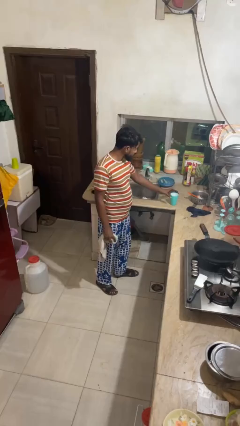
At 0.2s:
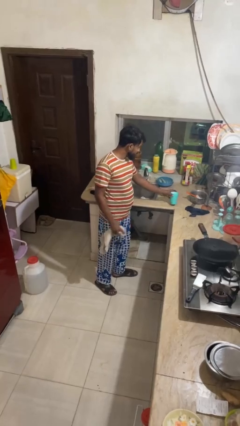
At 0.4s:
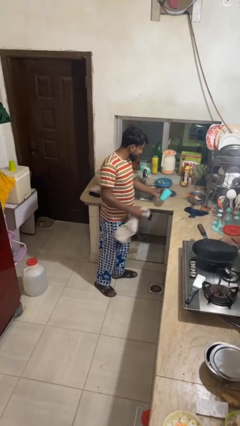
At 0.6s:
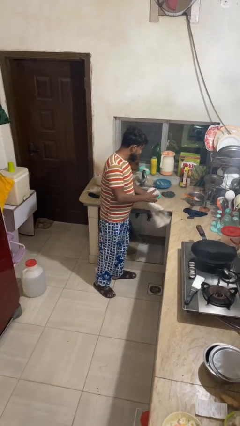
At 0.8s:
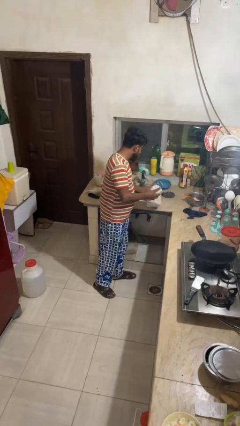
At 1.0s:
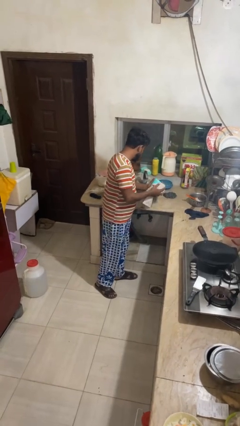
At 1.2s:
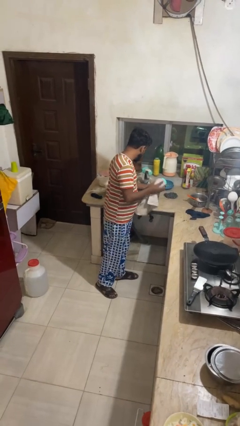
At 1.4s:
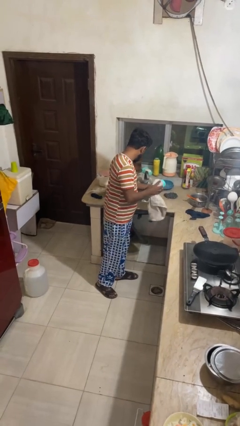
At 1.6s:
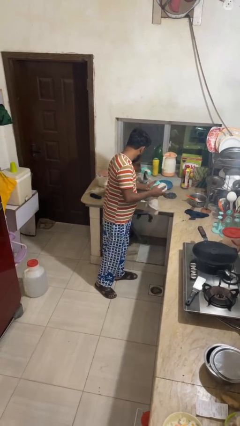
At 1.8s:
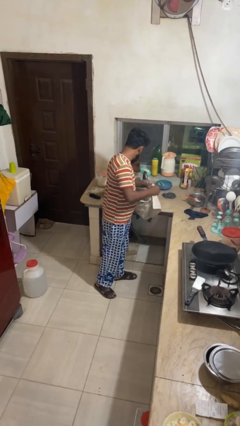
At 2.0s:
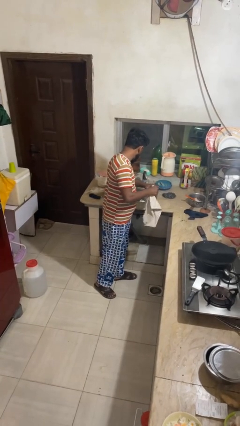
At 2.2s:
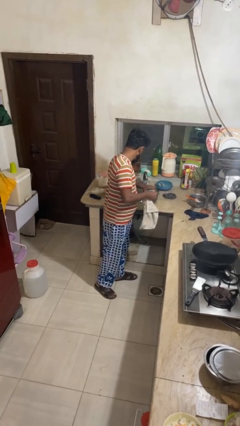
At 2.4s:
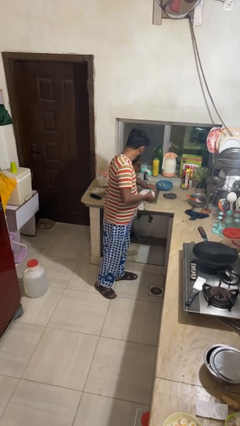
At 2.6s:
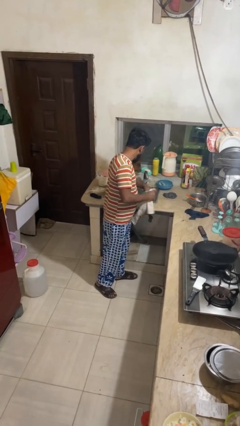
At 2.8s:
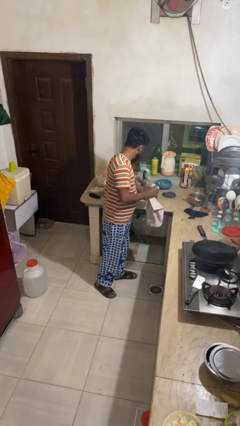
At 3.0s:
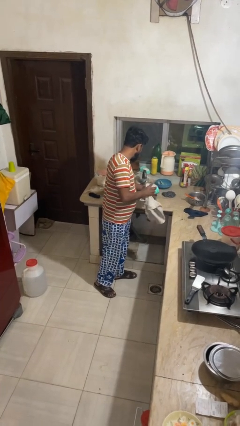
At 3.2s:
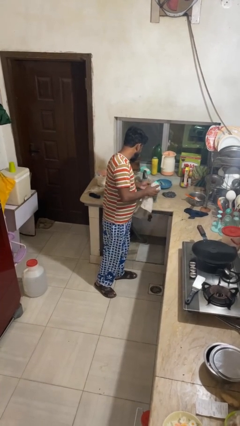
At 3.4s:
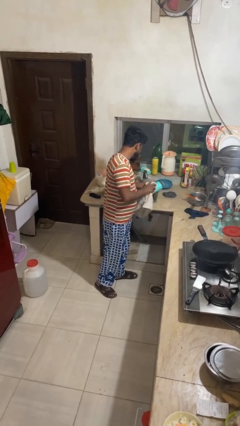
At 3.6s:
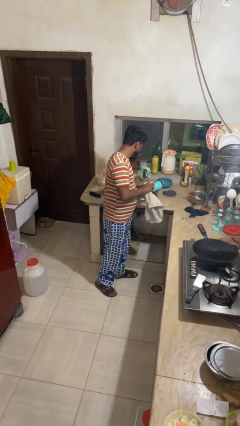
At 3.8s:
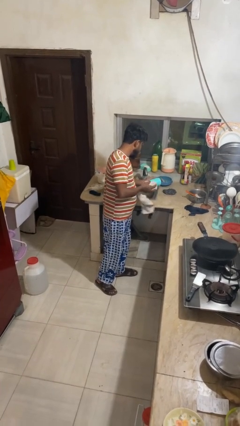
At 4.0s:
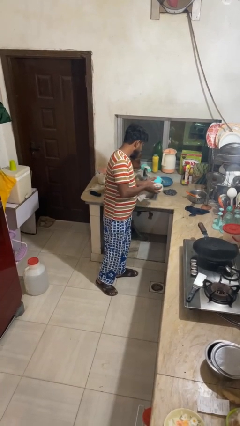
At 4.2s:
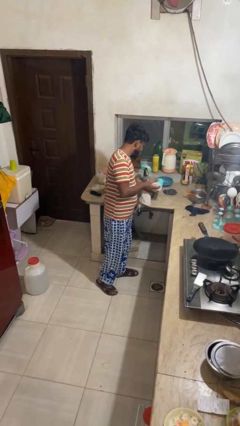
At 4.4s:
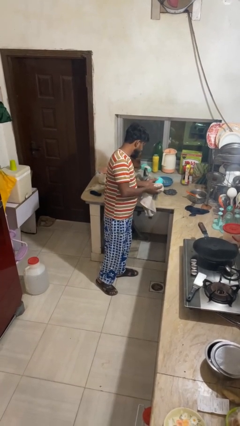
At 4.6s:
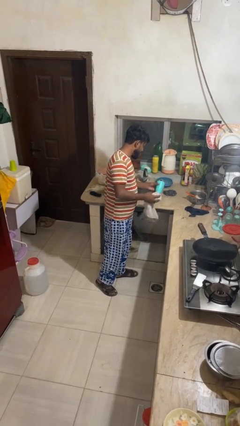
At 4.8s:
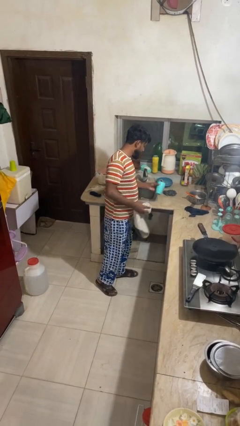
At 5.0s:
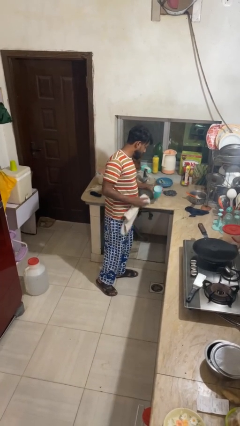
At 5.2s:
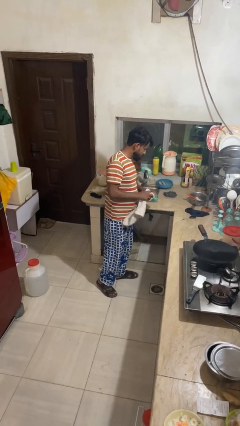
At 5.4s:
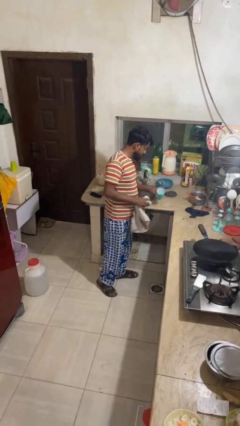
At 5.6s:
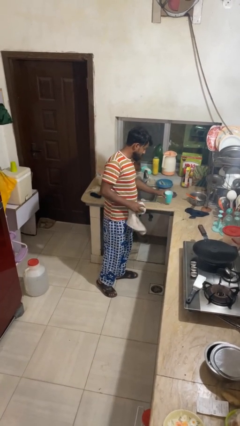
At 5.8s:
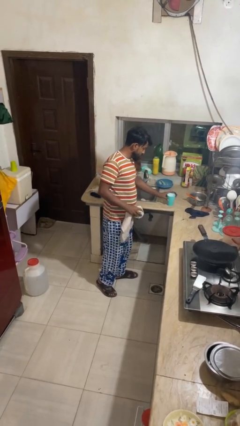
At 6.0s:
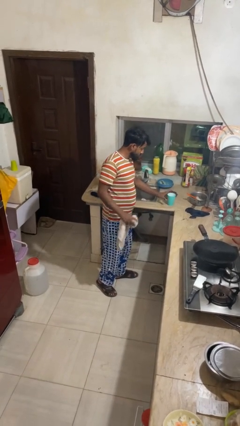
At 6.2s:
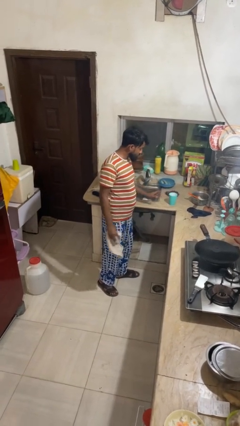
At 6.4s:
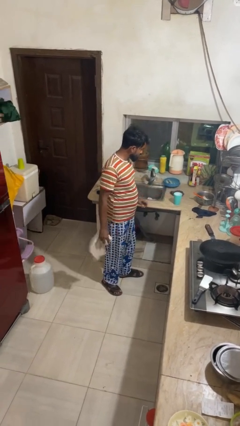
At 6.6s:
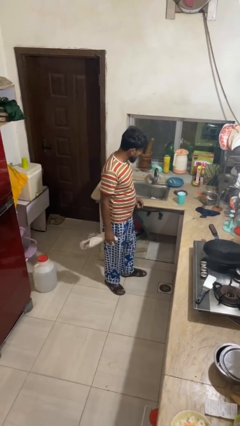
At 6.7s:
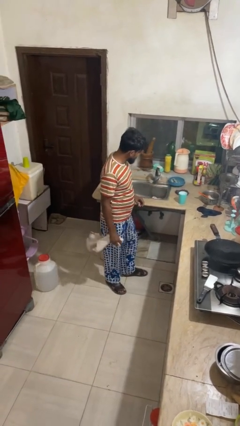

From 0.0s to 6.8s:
person dries dish

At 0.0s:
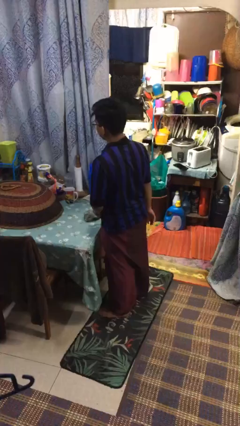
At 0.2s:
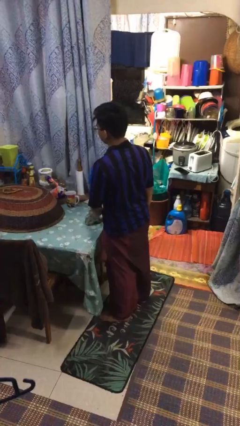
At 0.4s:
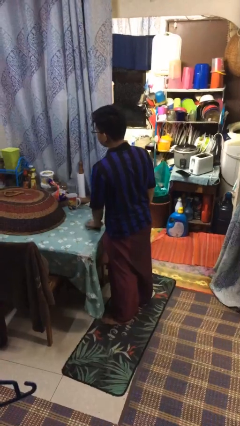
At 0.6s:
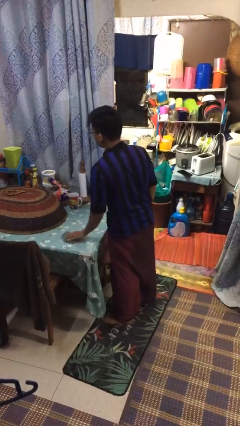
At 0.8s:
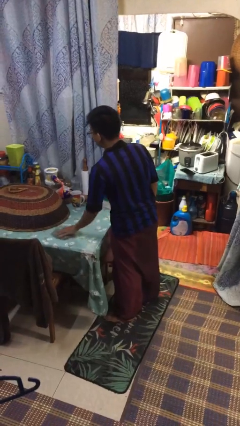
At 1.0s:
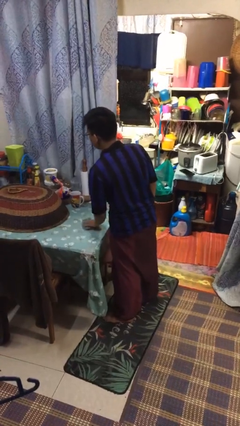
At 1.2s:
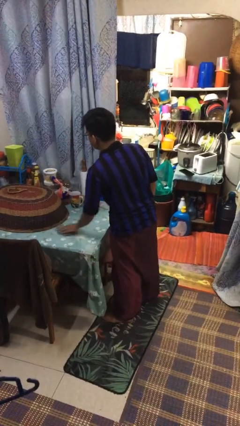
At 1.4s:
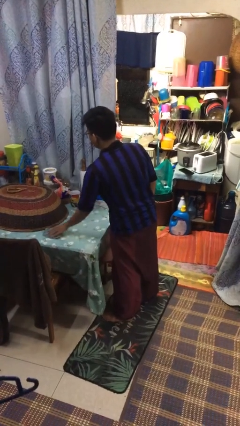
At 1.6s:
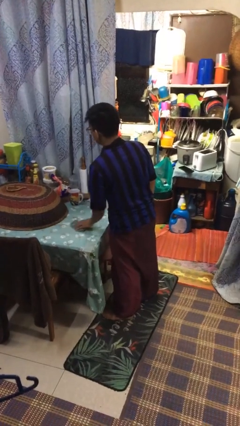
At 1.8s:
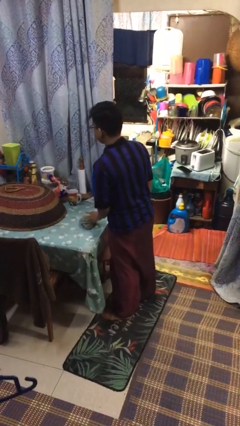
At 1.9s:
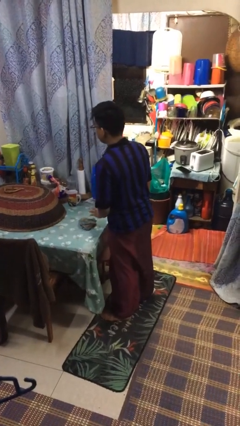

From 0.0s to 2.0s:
person cleans table with rag

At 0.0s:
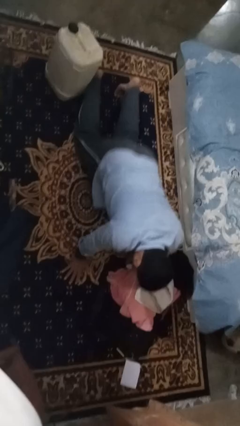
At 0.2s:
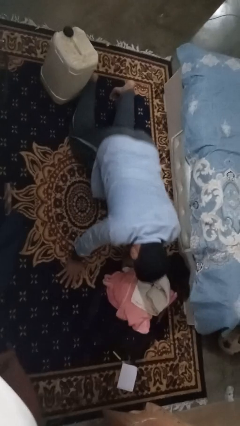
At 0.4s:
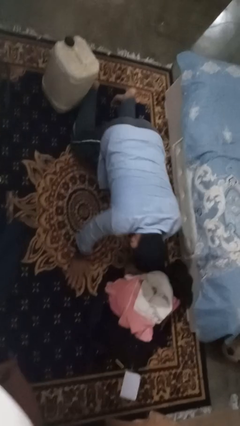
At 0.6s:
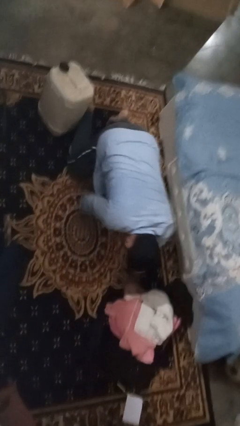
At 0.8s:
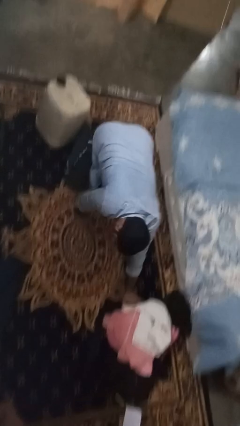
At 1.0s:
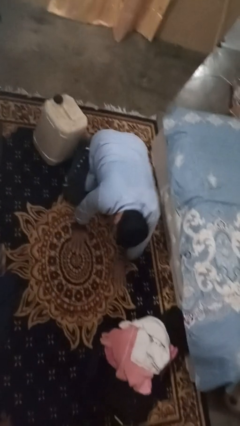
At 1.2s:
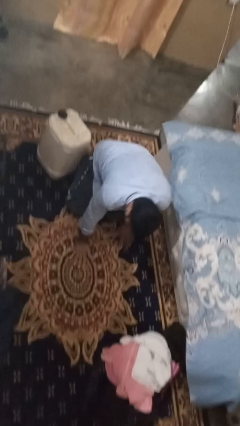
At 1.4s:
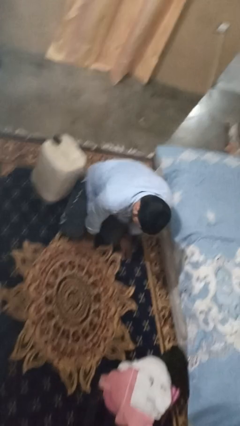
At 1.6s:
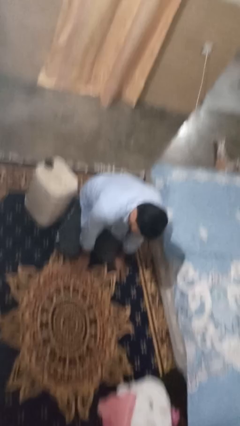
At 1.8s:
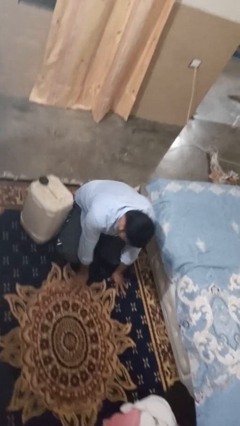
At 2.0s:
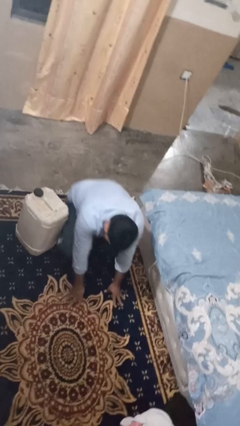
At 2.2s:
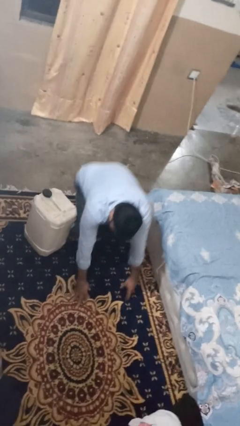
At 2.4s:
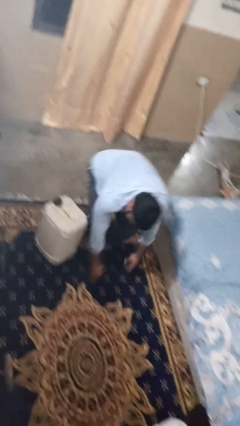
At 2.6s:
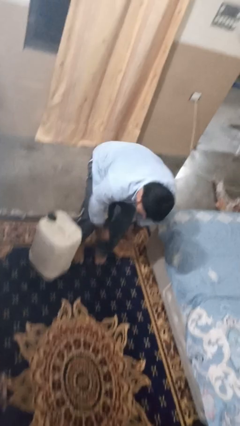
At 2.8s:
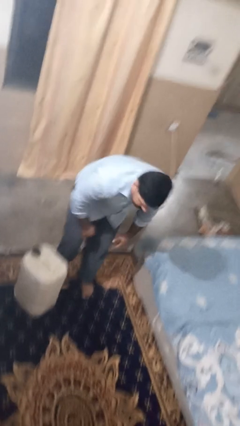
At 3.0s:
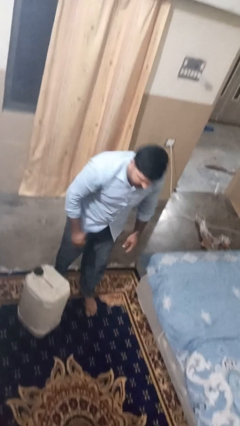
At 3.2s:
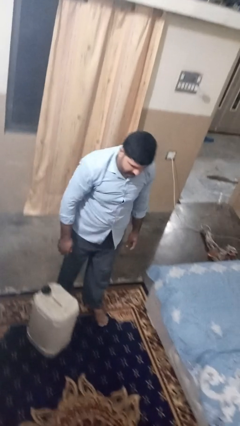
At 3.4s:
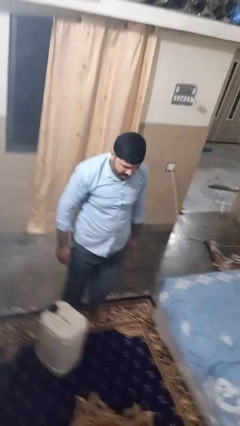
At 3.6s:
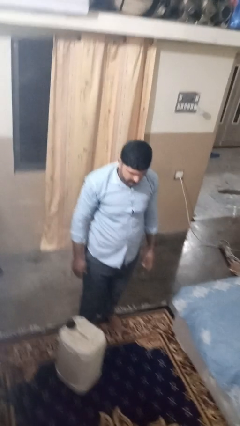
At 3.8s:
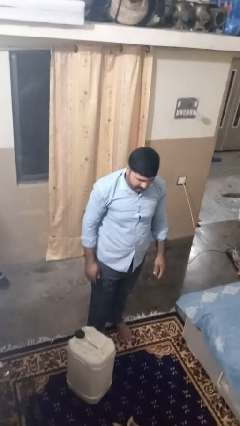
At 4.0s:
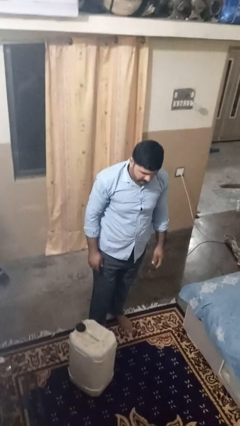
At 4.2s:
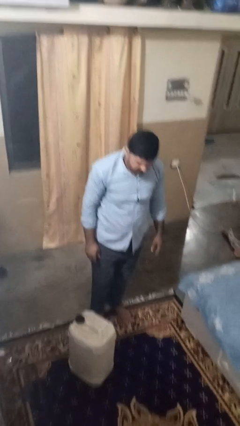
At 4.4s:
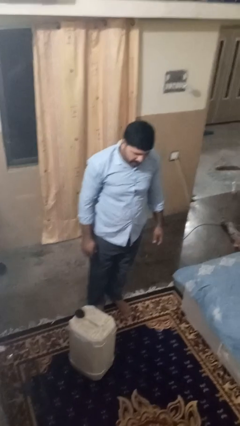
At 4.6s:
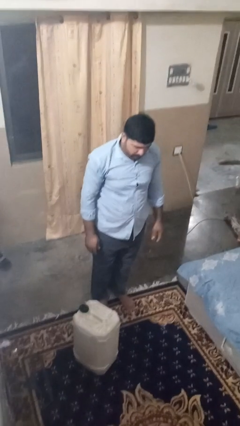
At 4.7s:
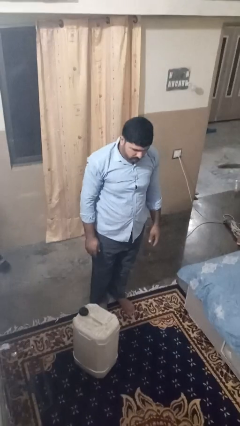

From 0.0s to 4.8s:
person stands up from floor

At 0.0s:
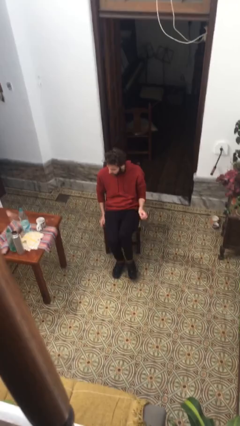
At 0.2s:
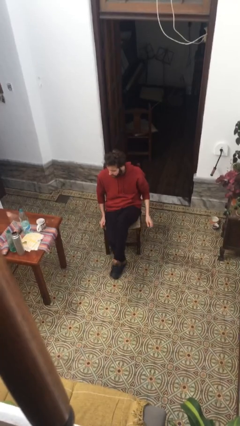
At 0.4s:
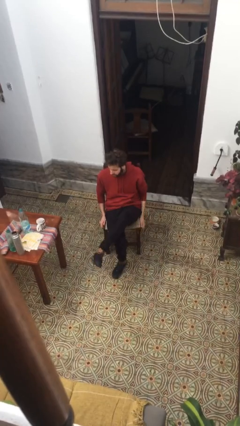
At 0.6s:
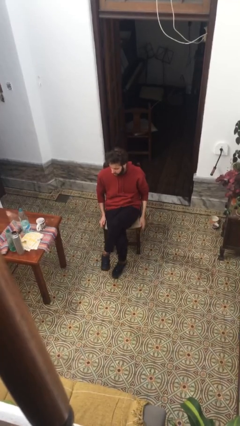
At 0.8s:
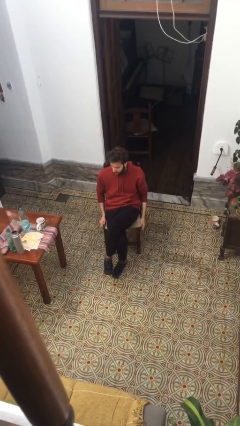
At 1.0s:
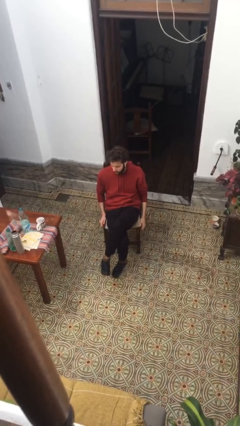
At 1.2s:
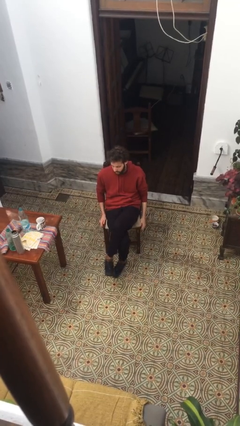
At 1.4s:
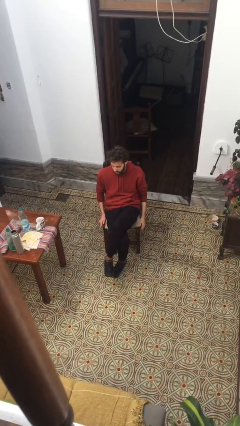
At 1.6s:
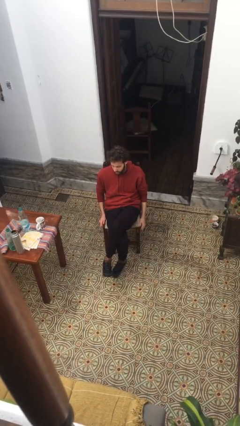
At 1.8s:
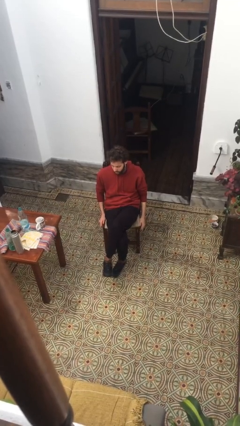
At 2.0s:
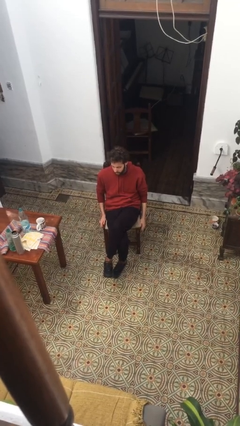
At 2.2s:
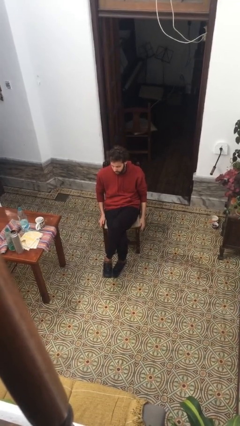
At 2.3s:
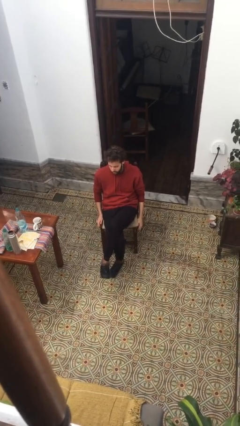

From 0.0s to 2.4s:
person crosses legs

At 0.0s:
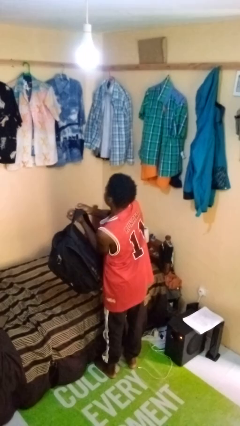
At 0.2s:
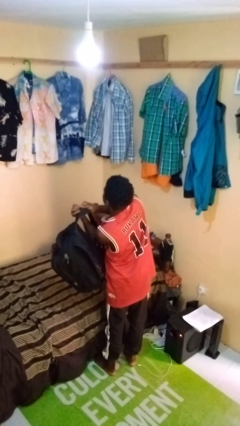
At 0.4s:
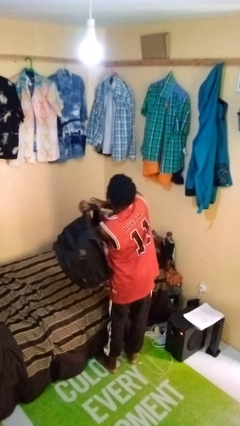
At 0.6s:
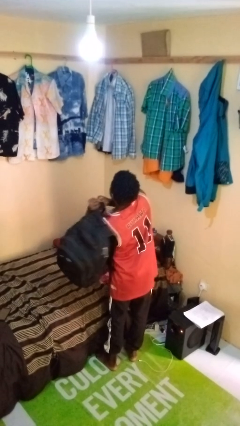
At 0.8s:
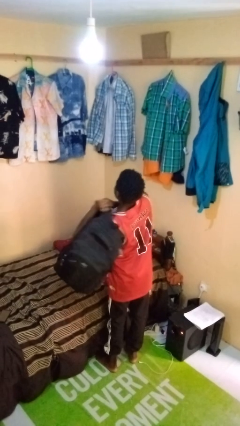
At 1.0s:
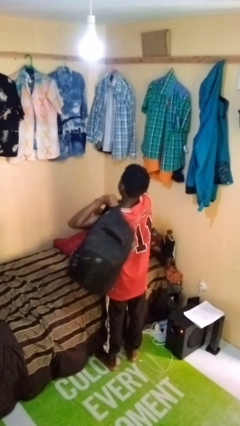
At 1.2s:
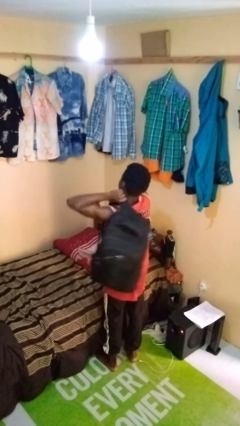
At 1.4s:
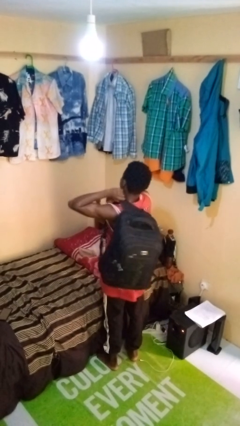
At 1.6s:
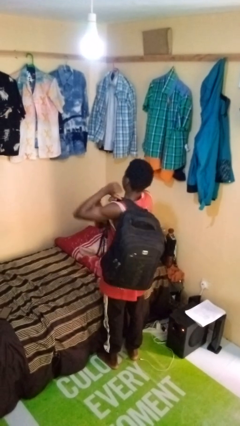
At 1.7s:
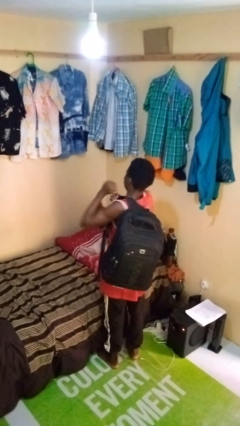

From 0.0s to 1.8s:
person puts on backpack

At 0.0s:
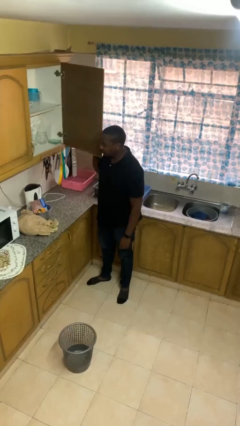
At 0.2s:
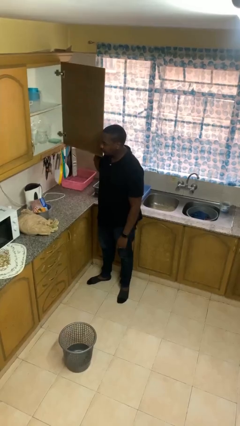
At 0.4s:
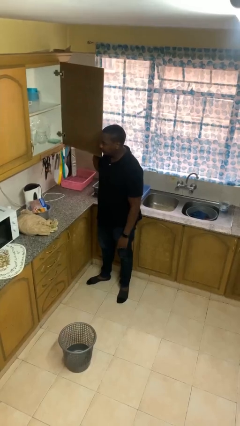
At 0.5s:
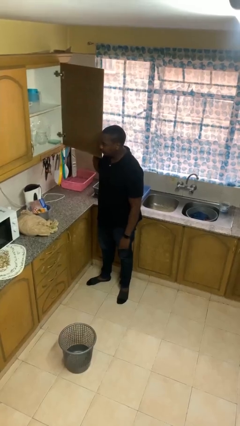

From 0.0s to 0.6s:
person closes cabinet
